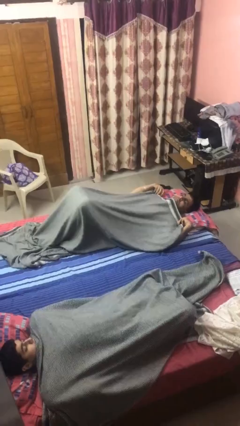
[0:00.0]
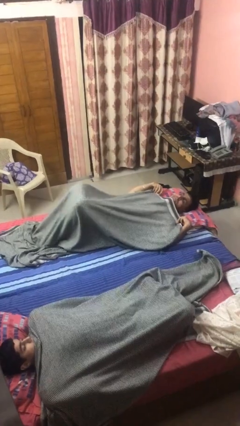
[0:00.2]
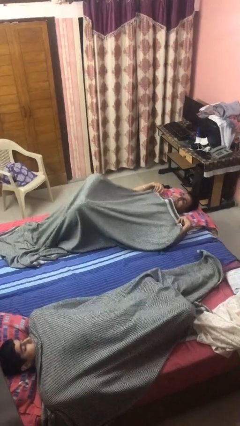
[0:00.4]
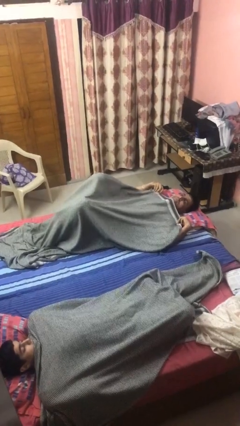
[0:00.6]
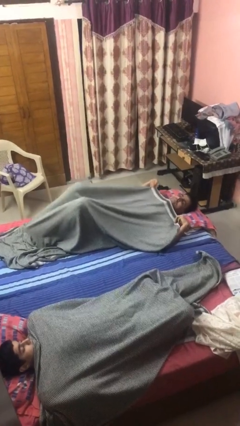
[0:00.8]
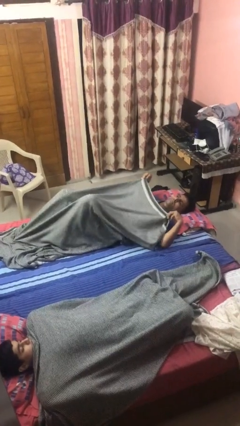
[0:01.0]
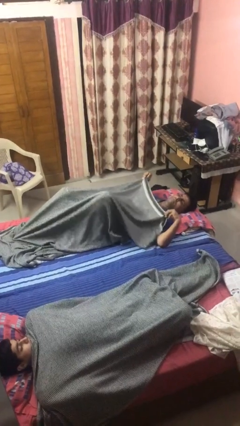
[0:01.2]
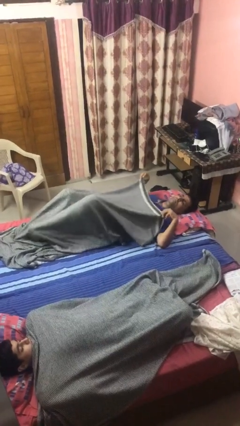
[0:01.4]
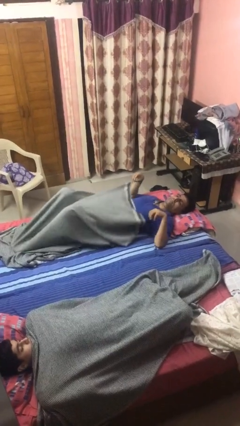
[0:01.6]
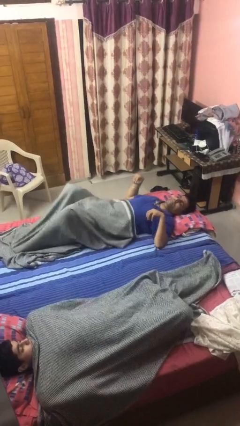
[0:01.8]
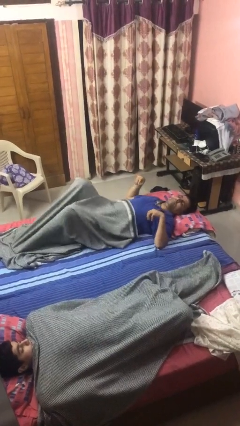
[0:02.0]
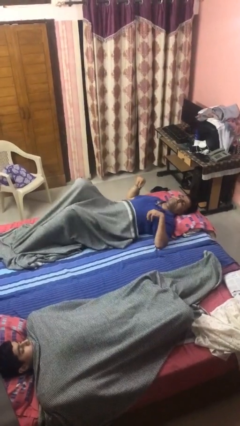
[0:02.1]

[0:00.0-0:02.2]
person uncovers with bedsheets

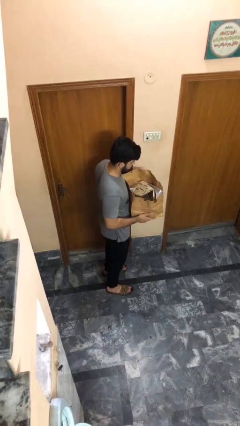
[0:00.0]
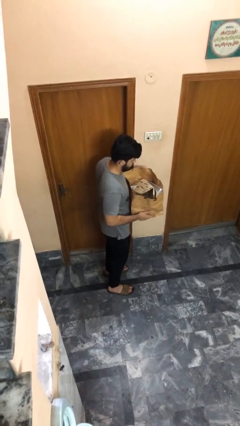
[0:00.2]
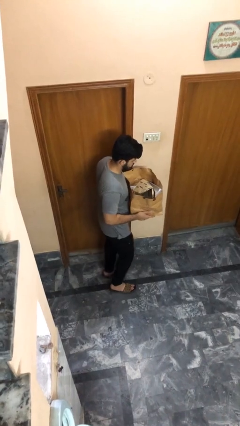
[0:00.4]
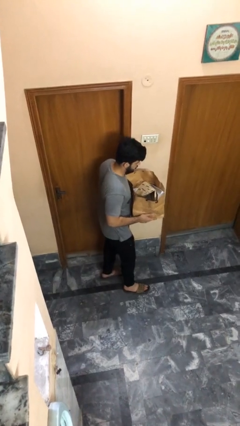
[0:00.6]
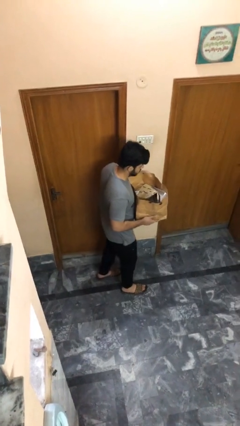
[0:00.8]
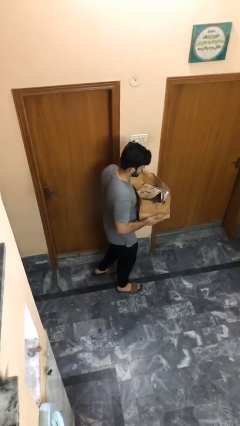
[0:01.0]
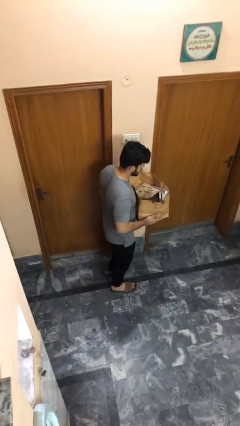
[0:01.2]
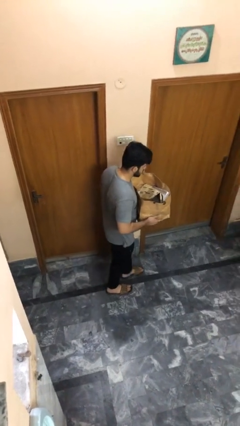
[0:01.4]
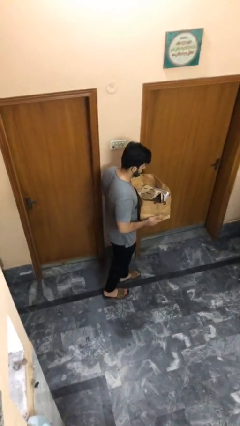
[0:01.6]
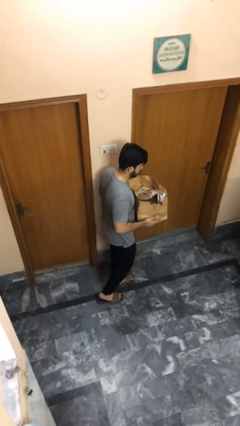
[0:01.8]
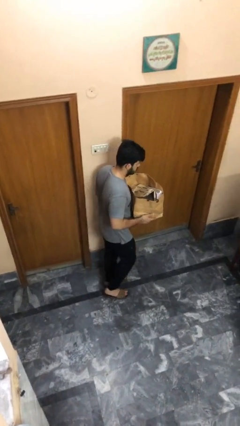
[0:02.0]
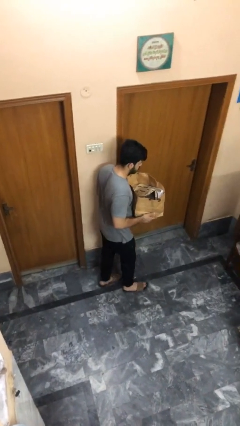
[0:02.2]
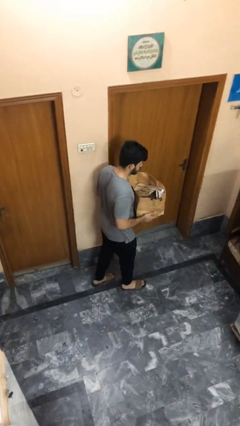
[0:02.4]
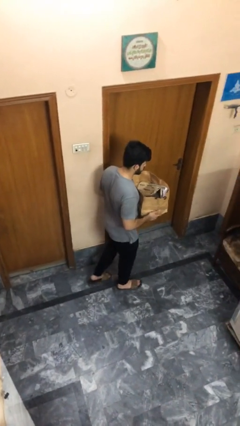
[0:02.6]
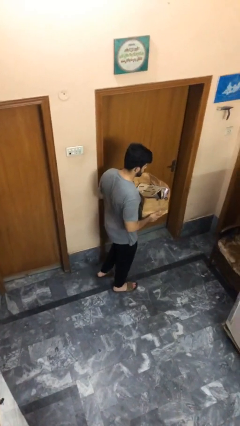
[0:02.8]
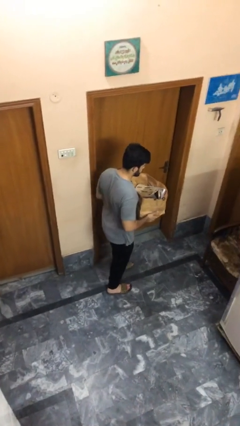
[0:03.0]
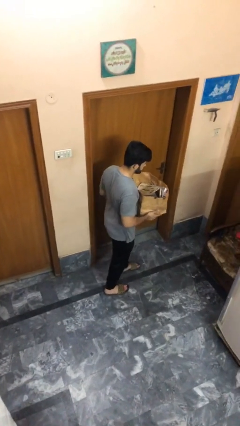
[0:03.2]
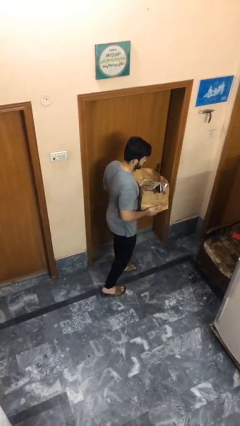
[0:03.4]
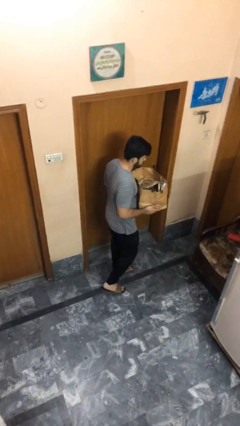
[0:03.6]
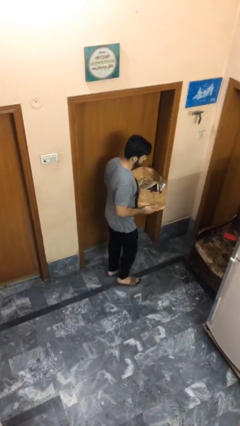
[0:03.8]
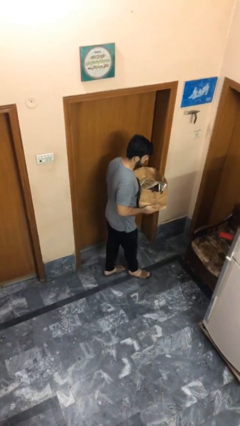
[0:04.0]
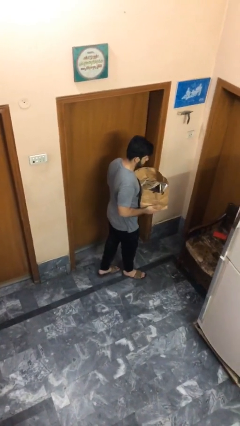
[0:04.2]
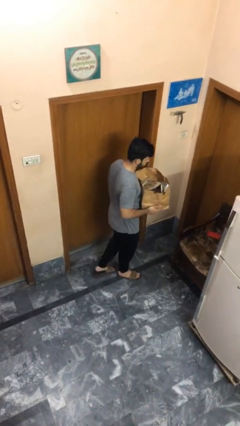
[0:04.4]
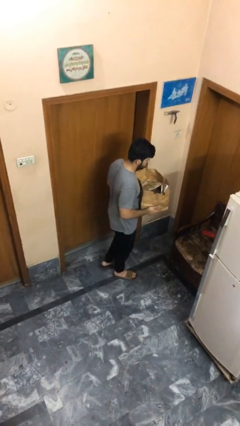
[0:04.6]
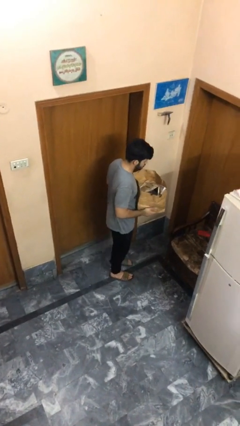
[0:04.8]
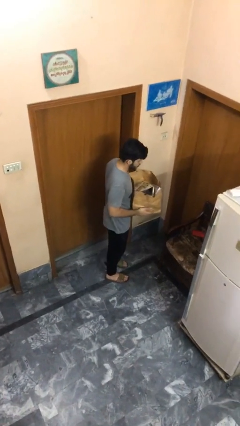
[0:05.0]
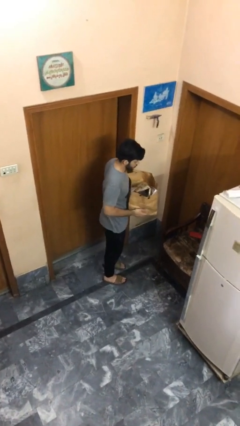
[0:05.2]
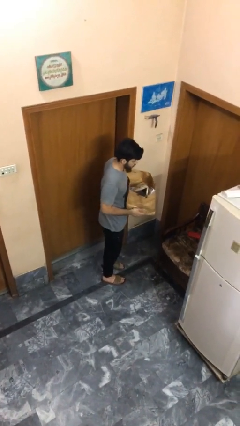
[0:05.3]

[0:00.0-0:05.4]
person carries groceries

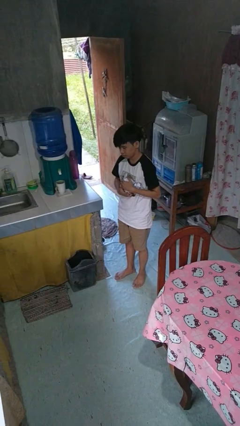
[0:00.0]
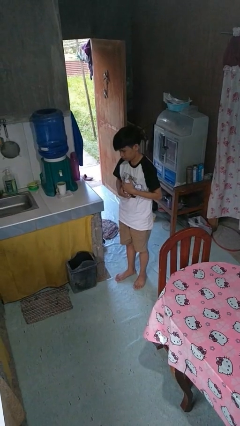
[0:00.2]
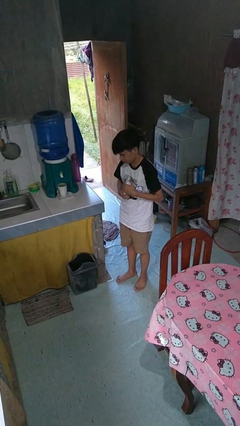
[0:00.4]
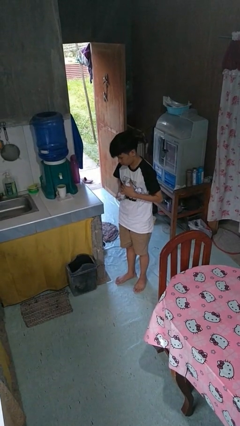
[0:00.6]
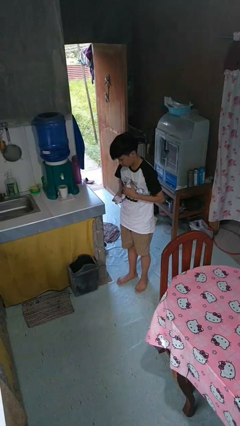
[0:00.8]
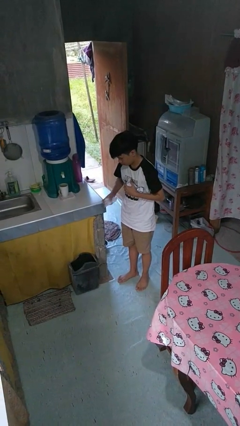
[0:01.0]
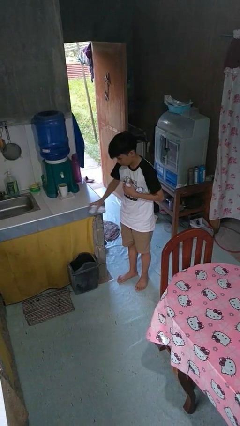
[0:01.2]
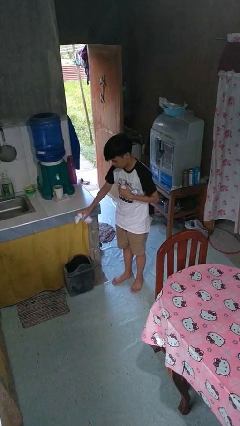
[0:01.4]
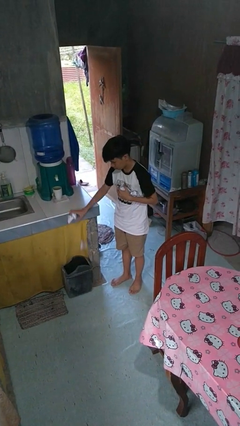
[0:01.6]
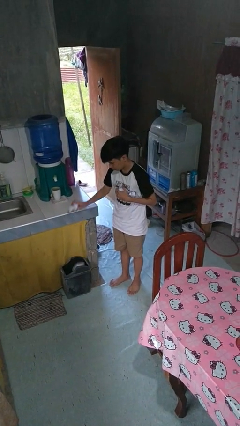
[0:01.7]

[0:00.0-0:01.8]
person discards trash

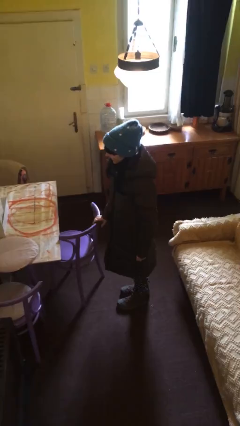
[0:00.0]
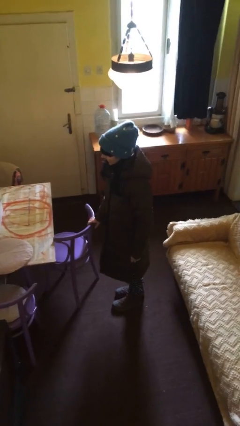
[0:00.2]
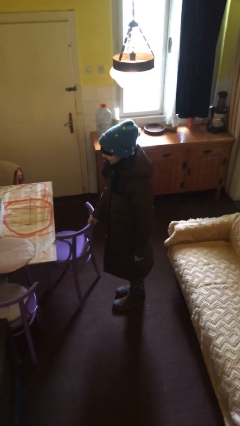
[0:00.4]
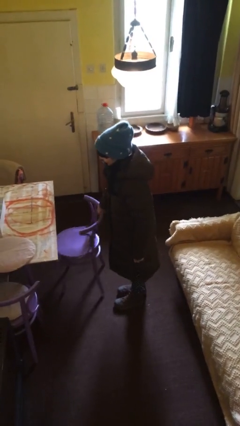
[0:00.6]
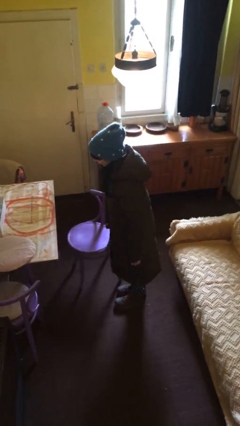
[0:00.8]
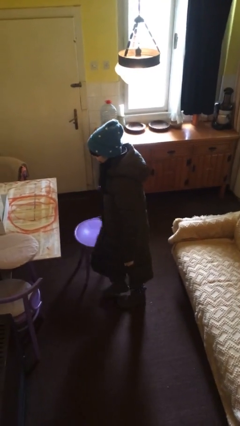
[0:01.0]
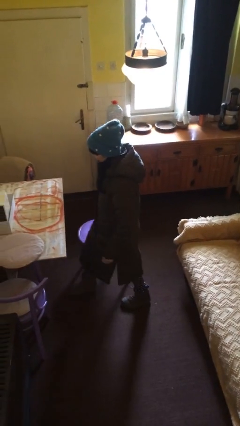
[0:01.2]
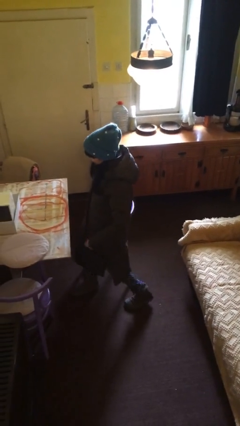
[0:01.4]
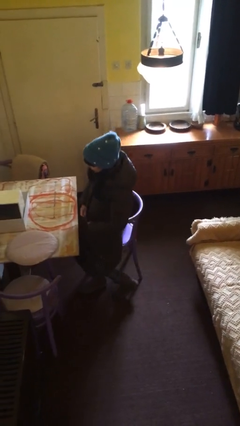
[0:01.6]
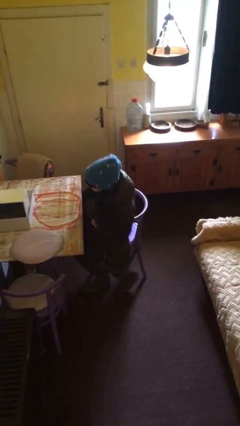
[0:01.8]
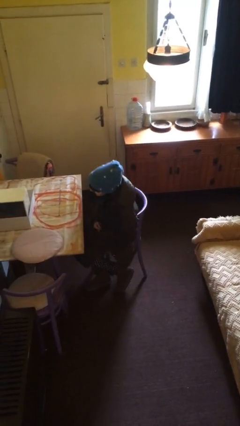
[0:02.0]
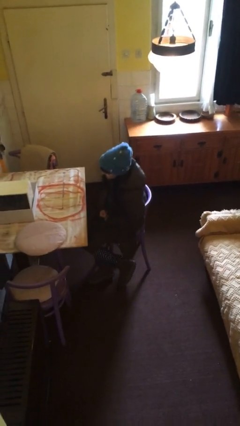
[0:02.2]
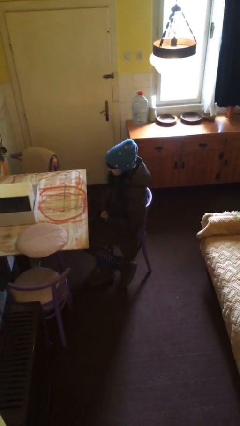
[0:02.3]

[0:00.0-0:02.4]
person sits down

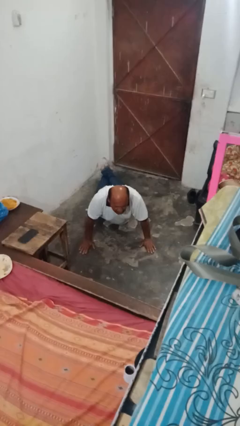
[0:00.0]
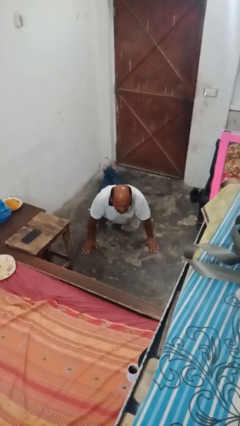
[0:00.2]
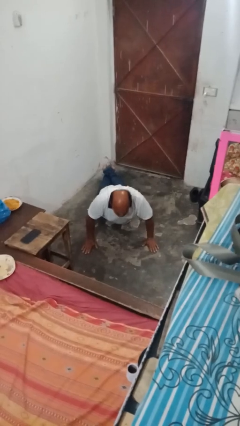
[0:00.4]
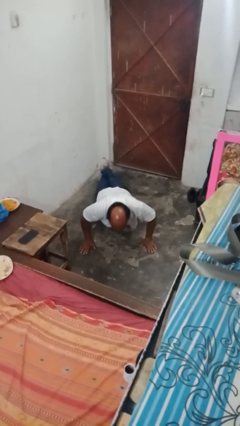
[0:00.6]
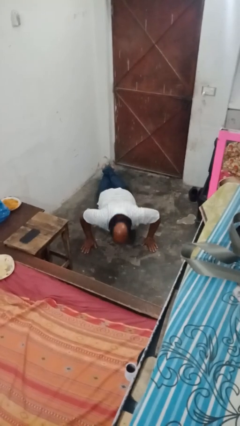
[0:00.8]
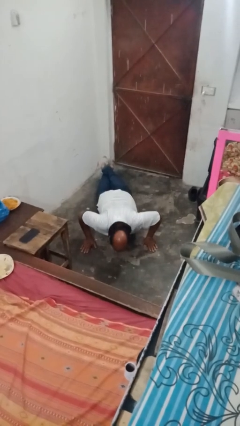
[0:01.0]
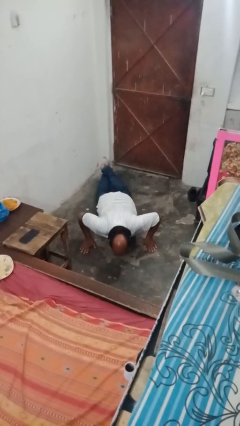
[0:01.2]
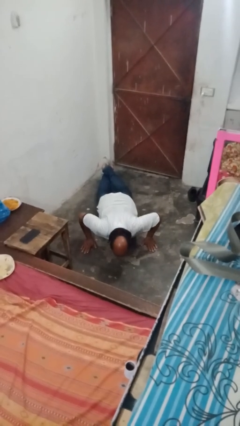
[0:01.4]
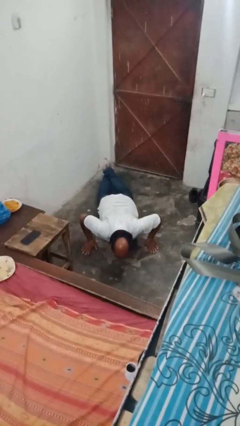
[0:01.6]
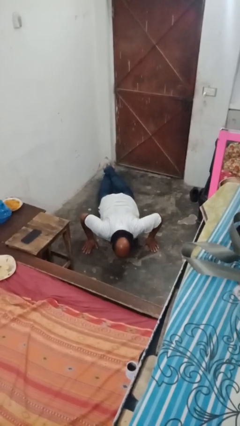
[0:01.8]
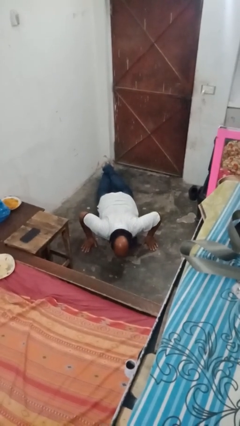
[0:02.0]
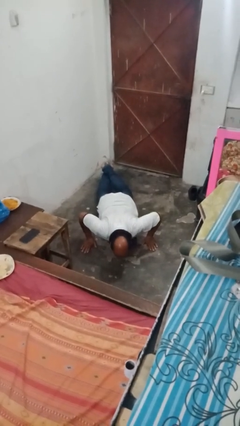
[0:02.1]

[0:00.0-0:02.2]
person exercises with pushup

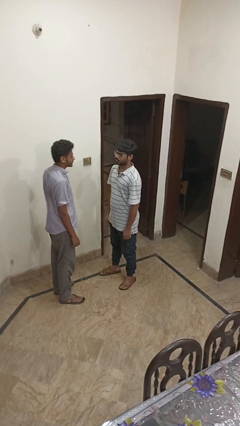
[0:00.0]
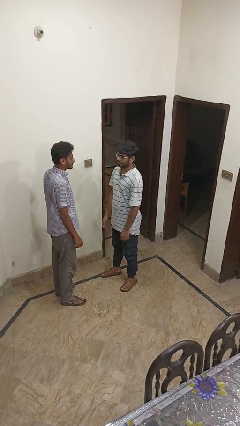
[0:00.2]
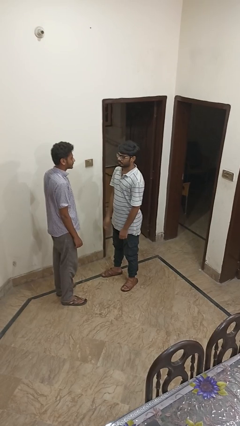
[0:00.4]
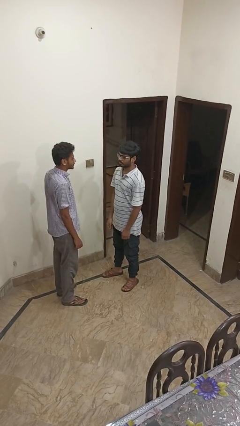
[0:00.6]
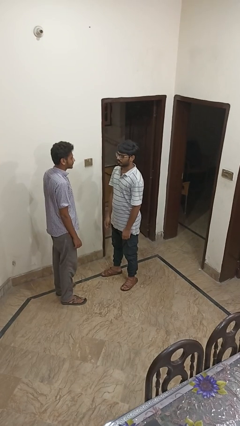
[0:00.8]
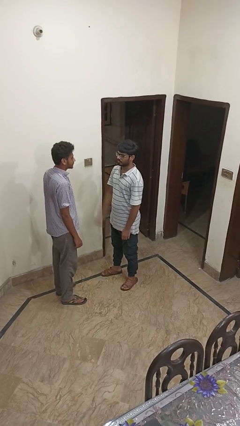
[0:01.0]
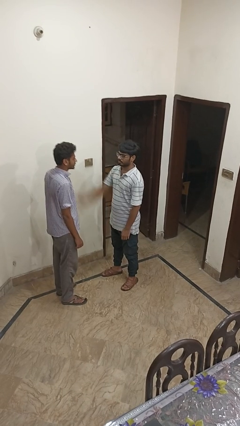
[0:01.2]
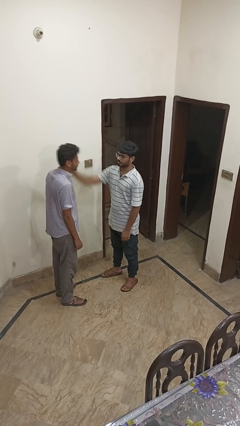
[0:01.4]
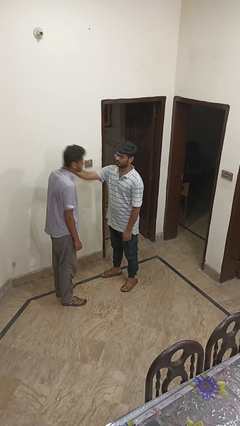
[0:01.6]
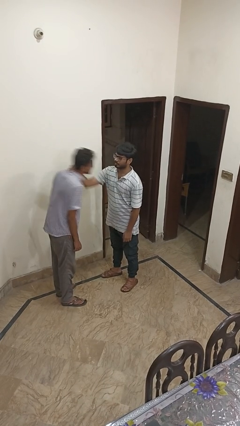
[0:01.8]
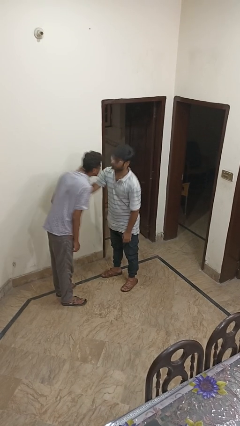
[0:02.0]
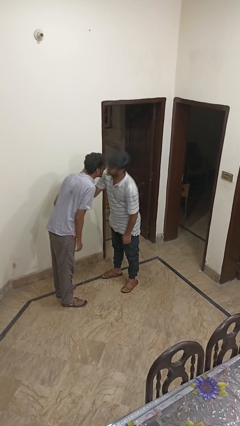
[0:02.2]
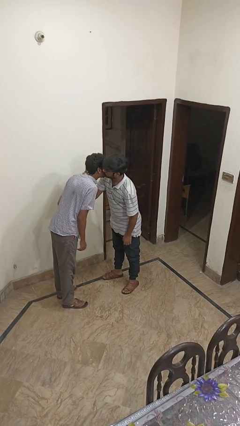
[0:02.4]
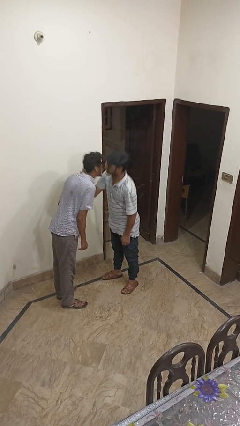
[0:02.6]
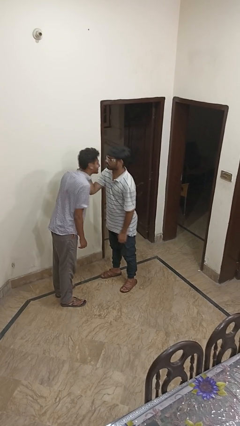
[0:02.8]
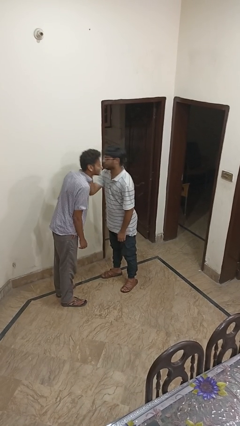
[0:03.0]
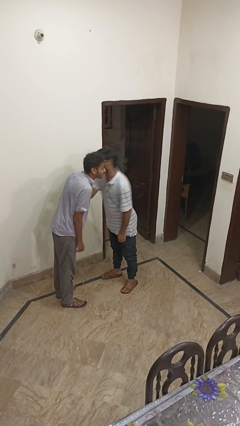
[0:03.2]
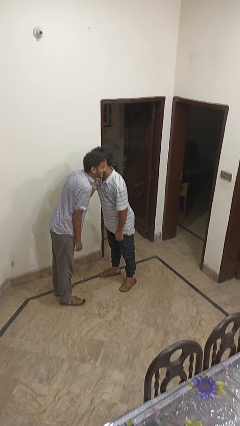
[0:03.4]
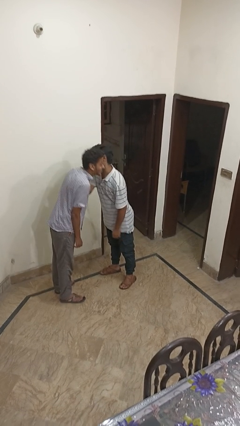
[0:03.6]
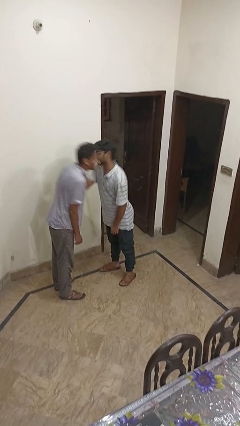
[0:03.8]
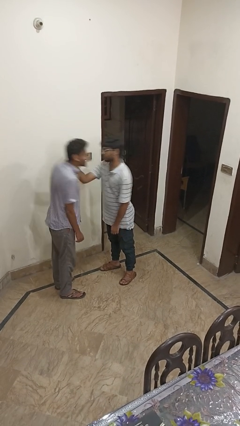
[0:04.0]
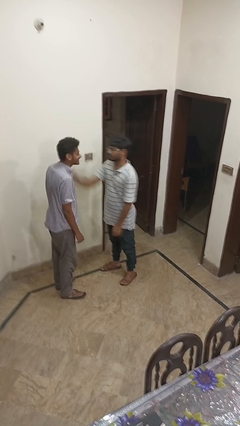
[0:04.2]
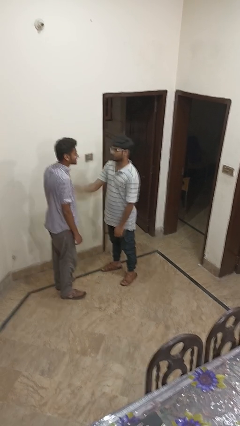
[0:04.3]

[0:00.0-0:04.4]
person kisses cheek of person
